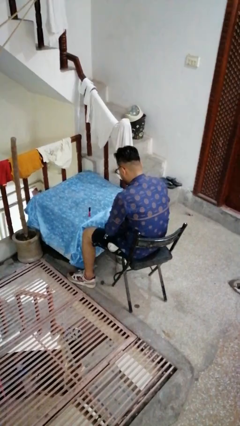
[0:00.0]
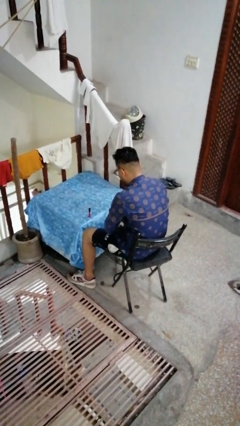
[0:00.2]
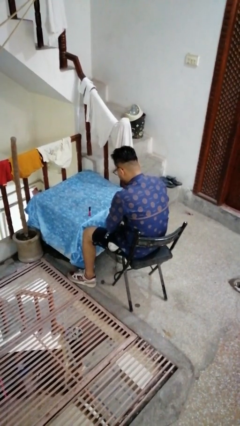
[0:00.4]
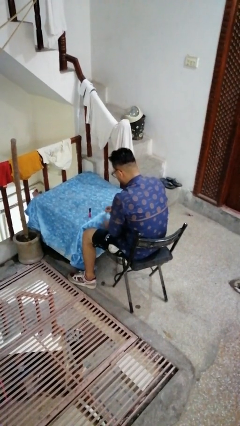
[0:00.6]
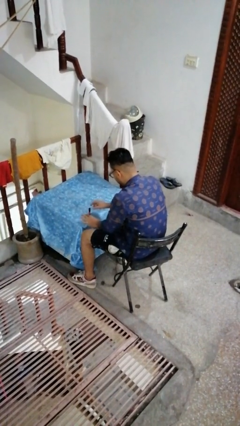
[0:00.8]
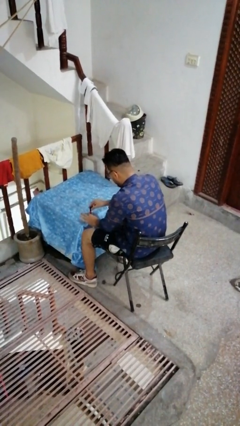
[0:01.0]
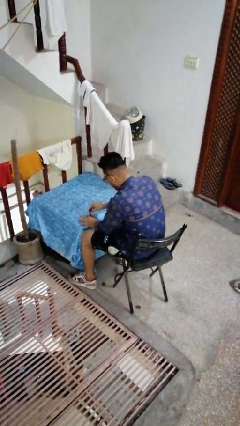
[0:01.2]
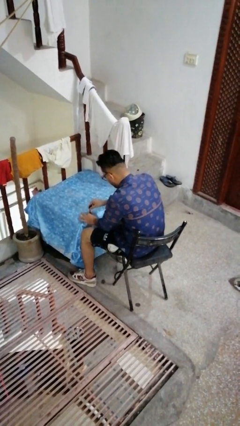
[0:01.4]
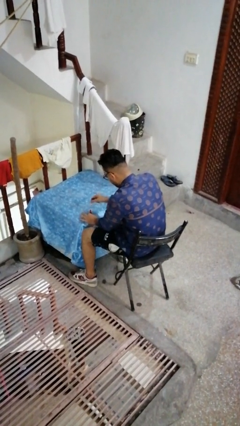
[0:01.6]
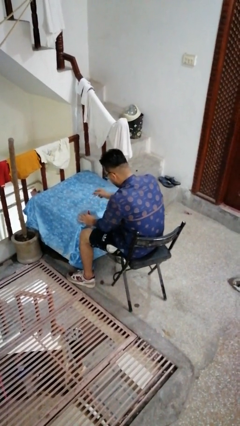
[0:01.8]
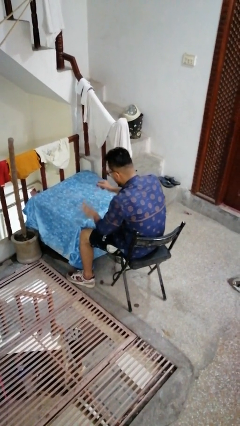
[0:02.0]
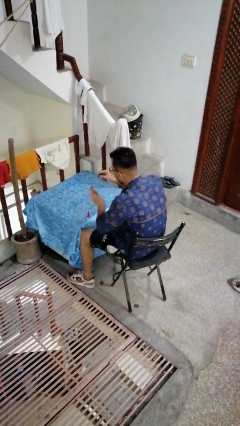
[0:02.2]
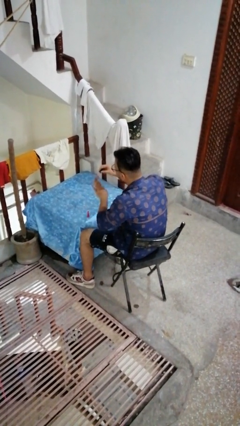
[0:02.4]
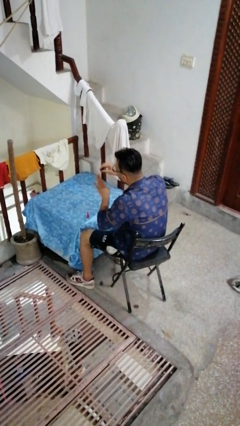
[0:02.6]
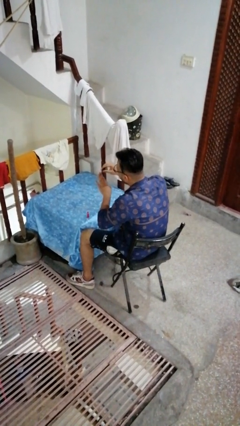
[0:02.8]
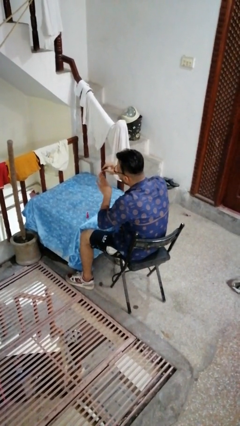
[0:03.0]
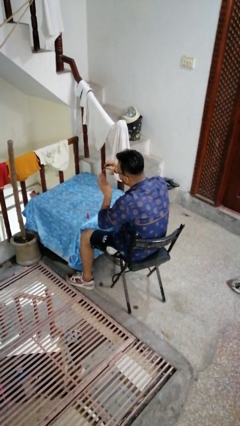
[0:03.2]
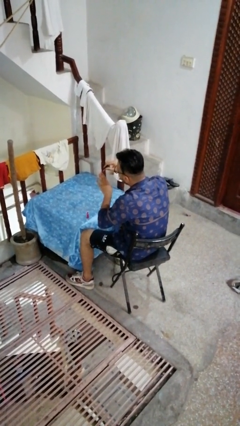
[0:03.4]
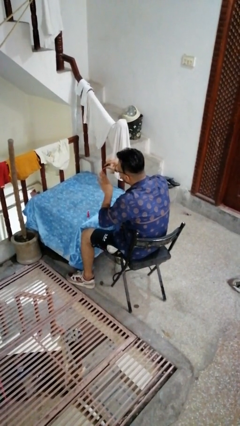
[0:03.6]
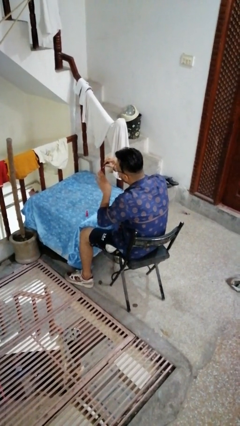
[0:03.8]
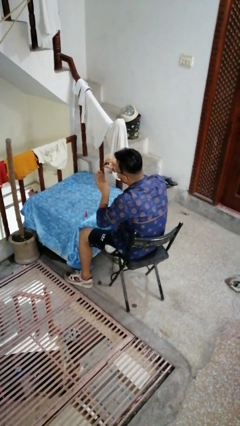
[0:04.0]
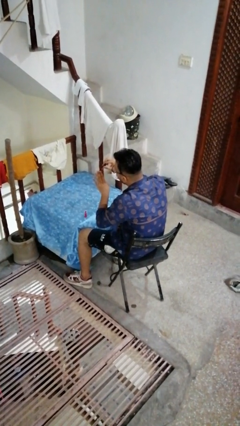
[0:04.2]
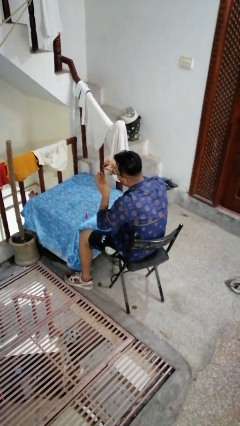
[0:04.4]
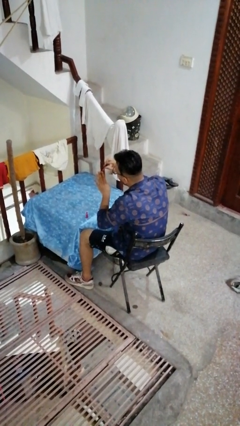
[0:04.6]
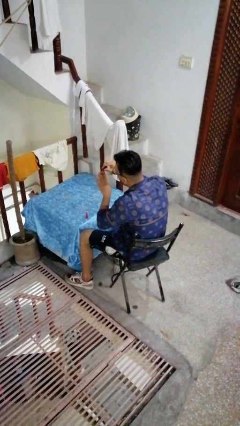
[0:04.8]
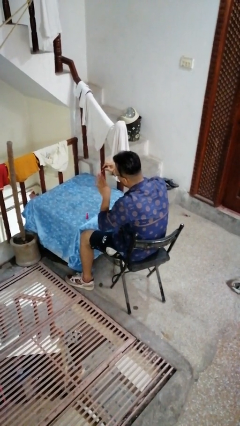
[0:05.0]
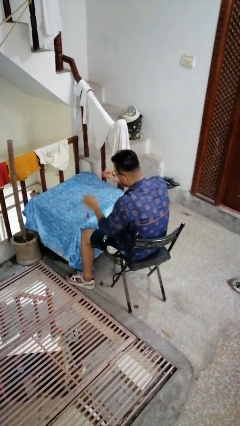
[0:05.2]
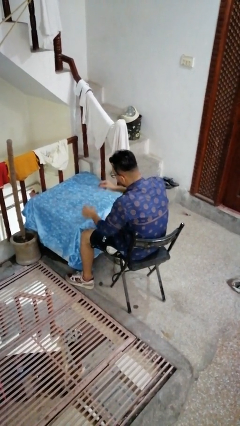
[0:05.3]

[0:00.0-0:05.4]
person paints fingernails

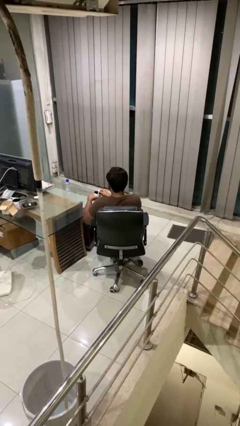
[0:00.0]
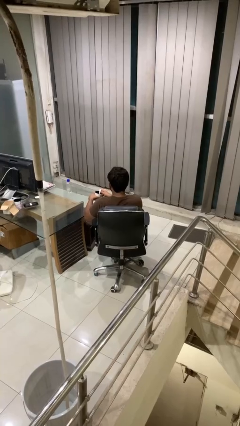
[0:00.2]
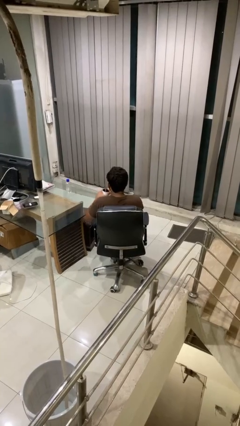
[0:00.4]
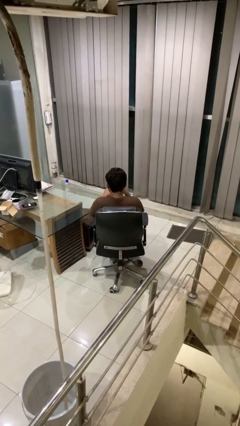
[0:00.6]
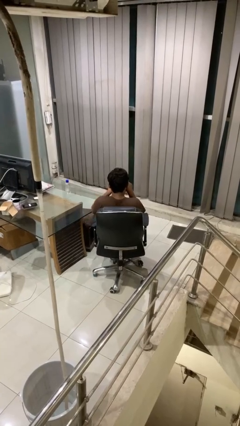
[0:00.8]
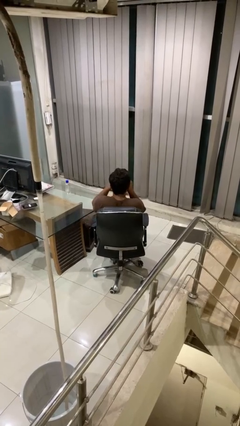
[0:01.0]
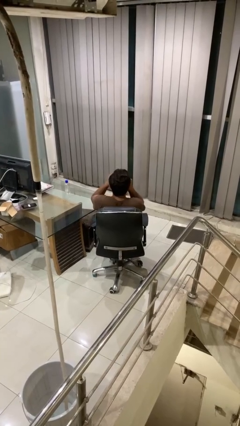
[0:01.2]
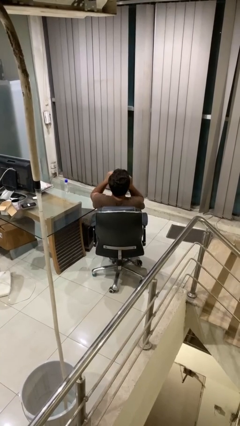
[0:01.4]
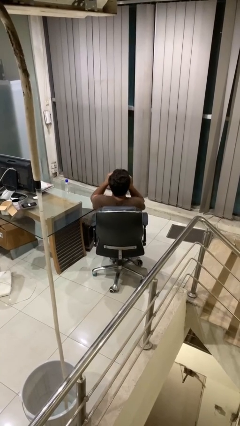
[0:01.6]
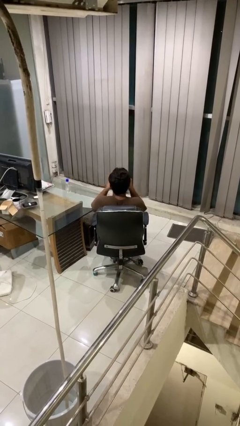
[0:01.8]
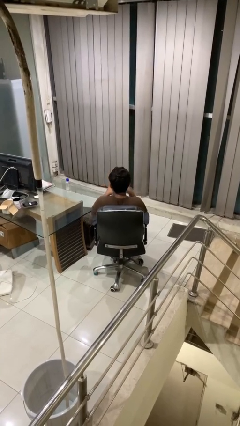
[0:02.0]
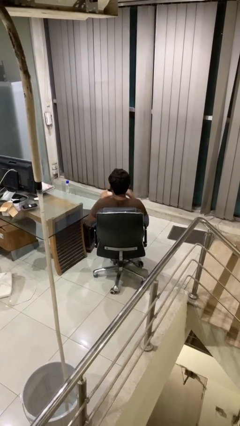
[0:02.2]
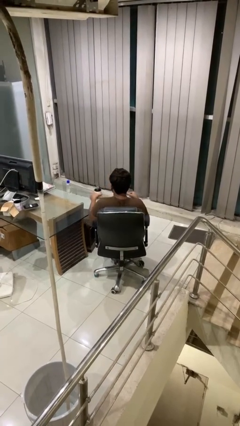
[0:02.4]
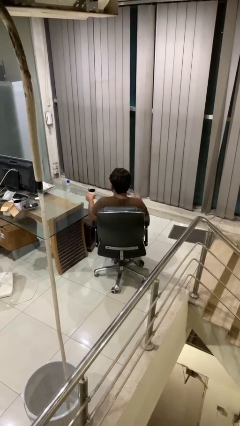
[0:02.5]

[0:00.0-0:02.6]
person drinks from mug

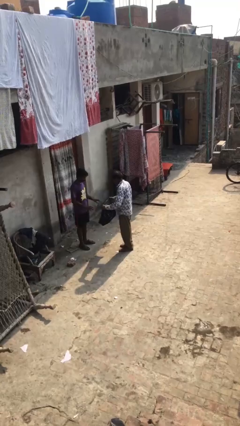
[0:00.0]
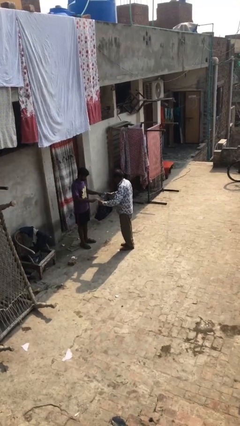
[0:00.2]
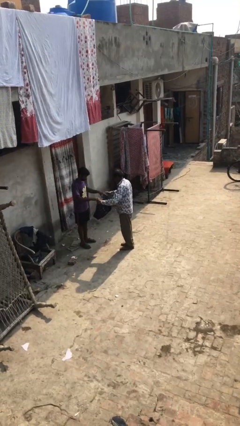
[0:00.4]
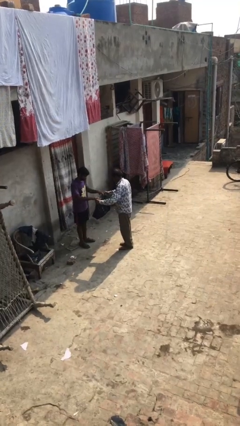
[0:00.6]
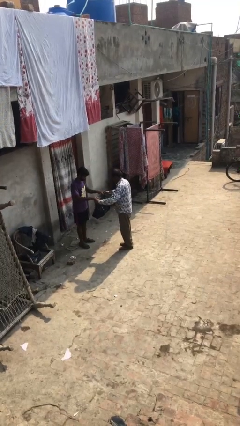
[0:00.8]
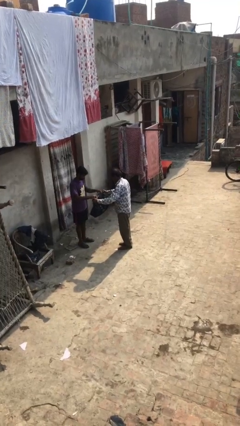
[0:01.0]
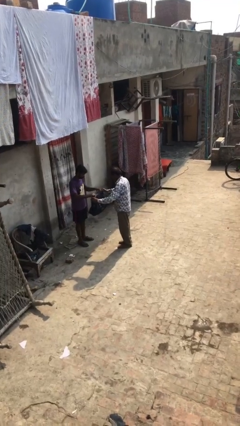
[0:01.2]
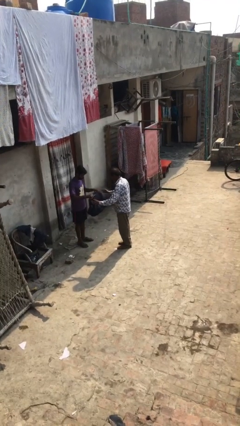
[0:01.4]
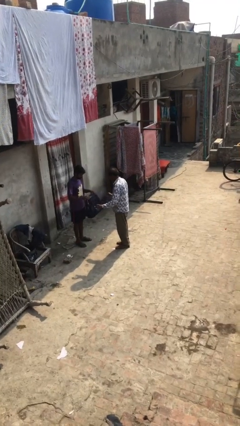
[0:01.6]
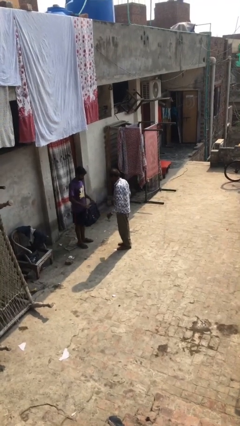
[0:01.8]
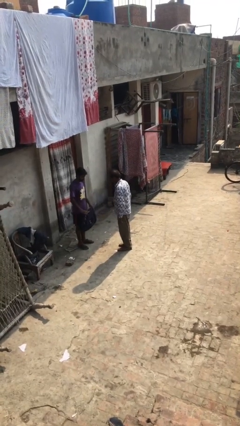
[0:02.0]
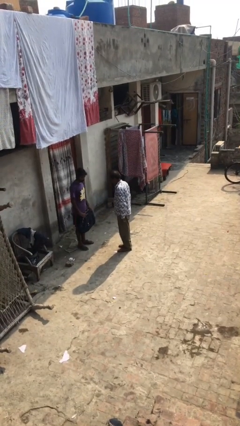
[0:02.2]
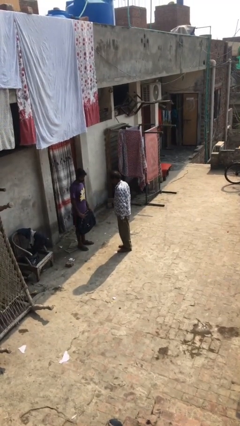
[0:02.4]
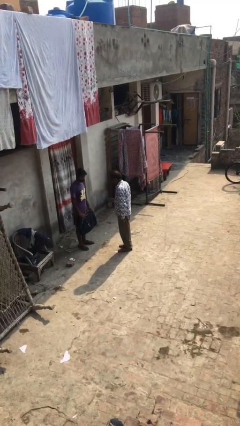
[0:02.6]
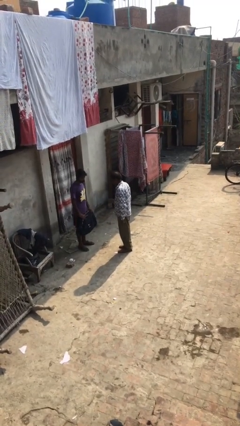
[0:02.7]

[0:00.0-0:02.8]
person transfers object to person

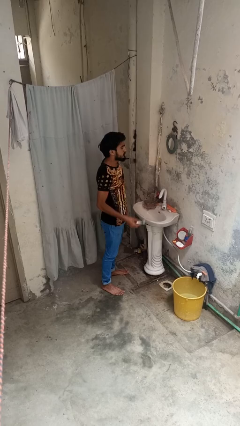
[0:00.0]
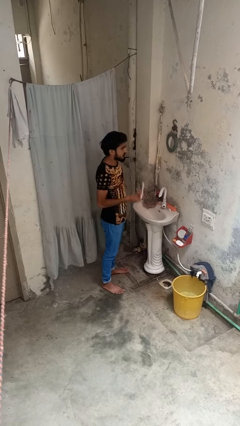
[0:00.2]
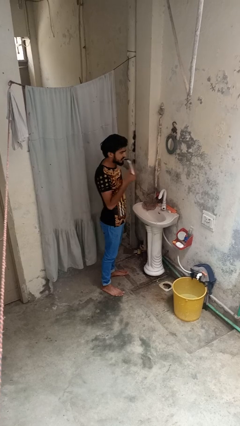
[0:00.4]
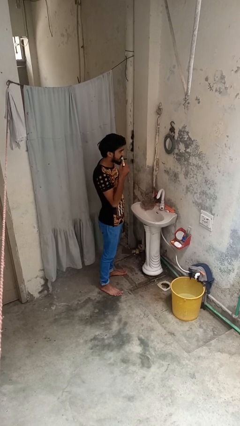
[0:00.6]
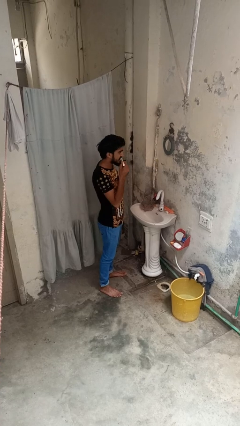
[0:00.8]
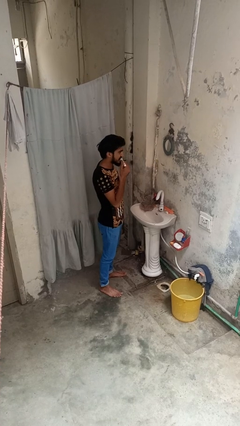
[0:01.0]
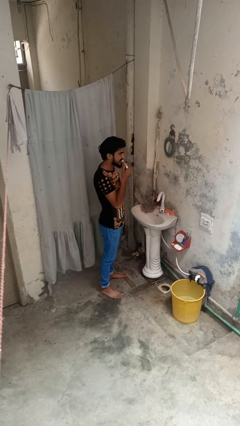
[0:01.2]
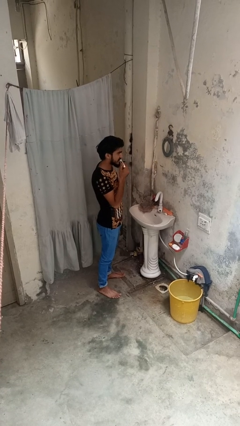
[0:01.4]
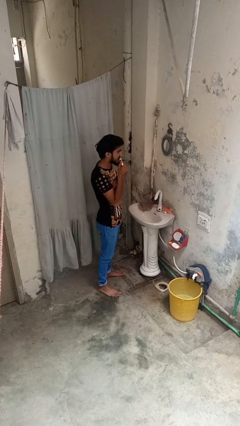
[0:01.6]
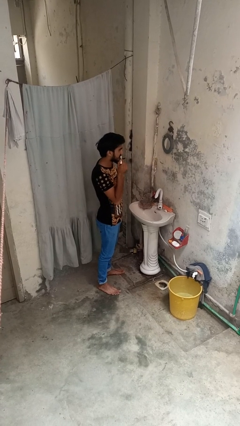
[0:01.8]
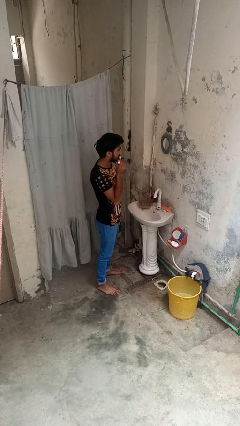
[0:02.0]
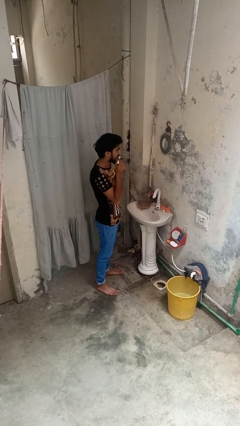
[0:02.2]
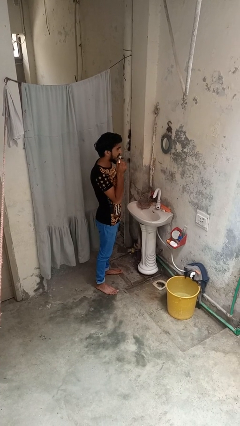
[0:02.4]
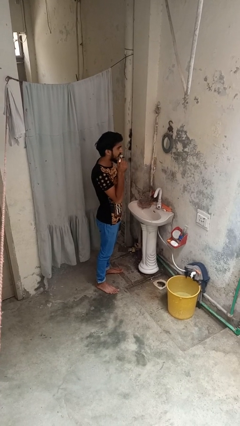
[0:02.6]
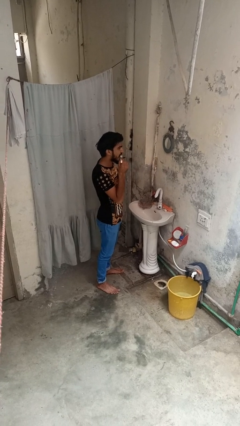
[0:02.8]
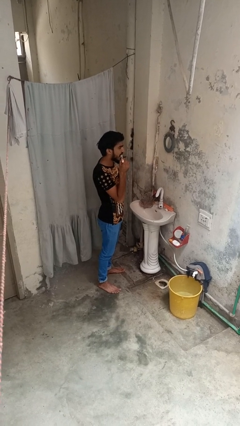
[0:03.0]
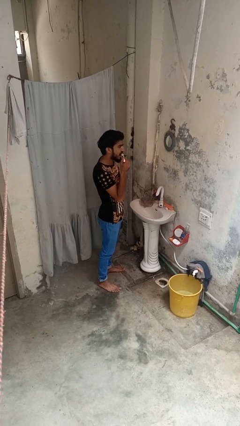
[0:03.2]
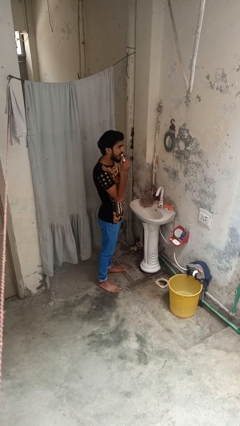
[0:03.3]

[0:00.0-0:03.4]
person brushes teeth

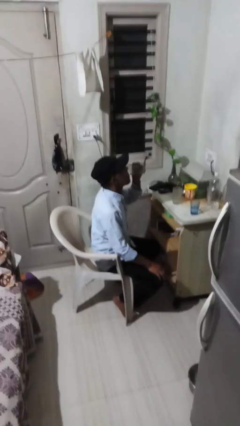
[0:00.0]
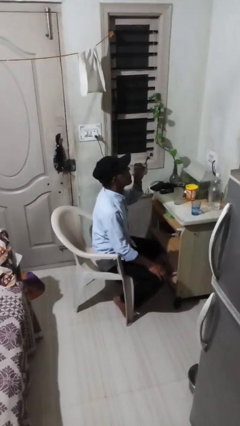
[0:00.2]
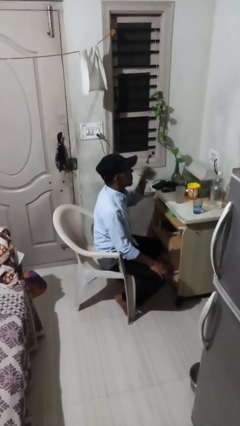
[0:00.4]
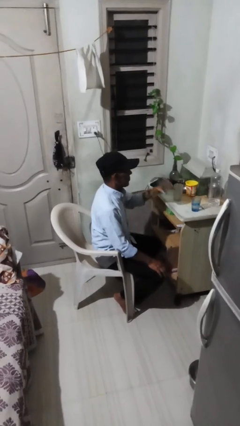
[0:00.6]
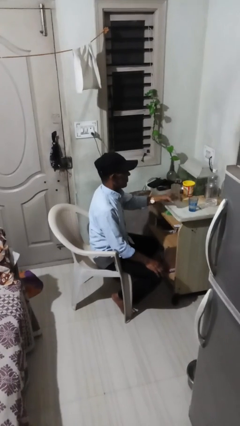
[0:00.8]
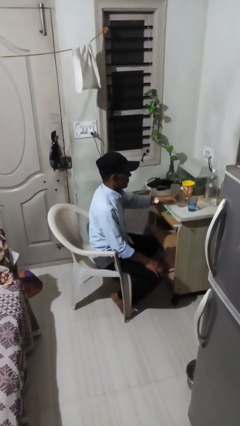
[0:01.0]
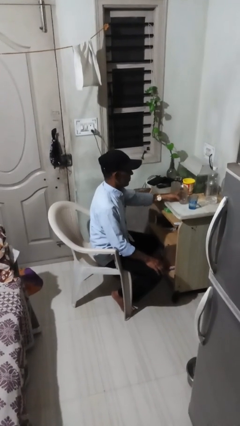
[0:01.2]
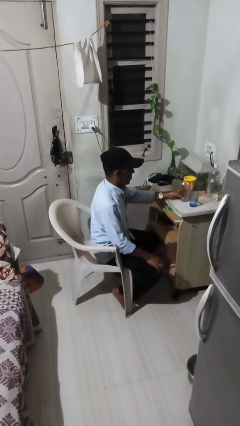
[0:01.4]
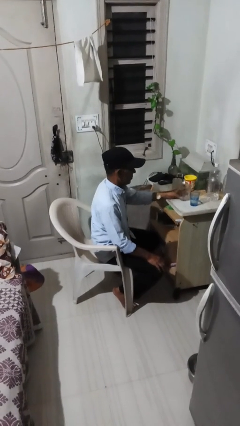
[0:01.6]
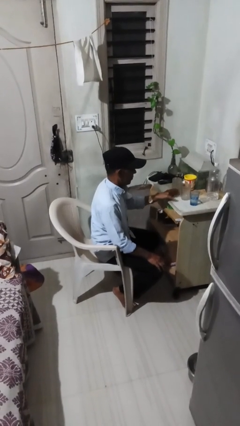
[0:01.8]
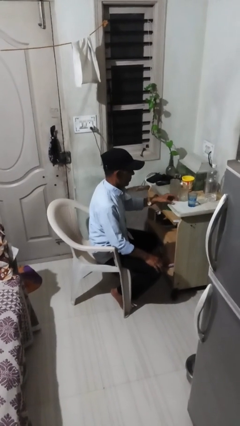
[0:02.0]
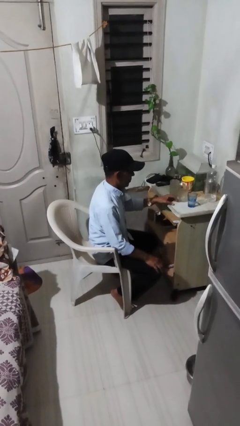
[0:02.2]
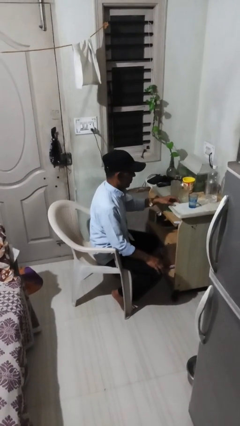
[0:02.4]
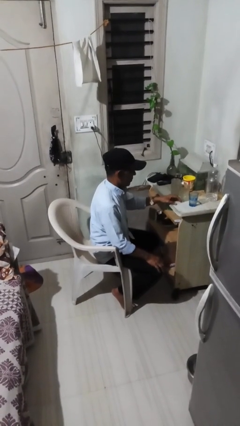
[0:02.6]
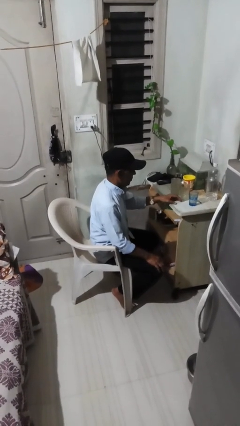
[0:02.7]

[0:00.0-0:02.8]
person puts down object on table

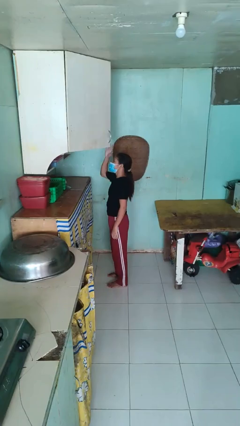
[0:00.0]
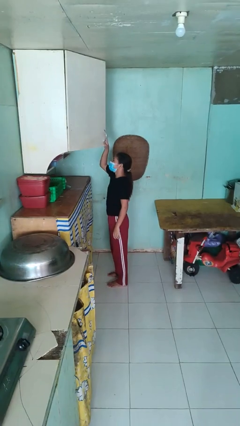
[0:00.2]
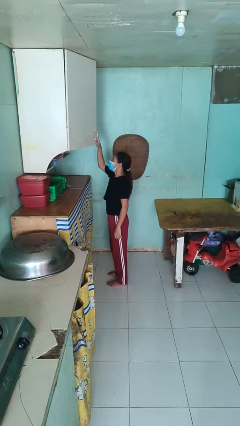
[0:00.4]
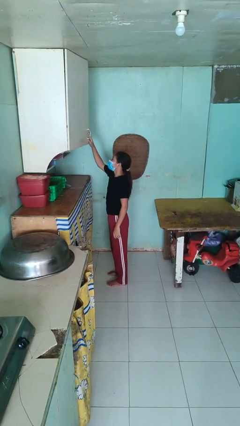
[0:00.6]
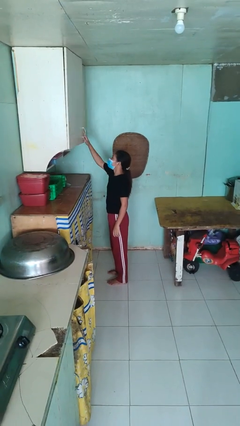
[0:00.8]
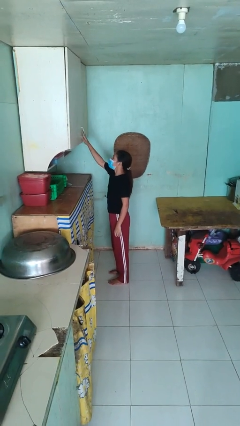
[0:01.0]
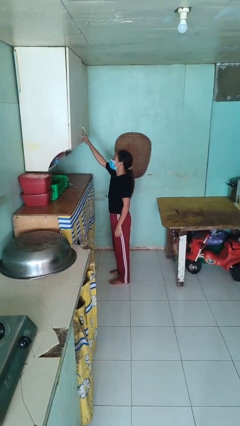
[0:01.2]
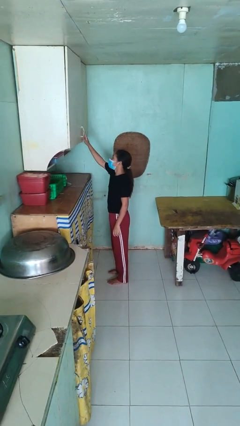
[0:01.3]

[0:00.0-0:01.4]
person closes cabinet
